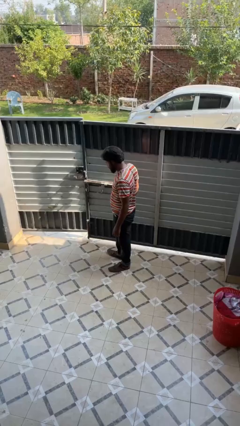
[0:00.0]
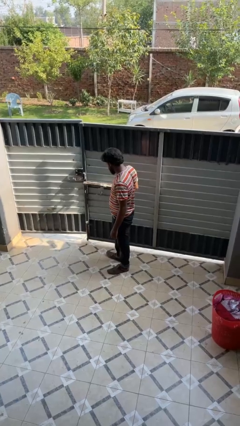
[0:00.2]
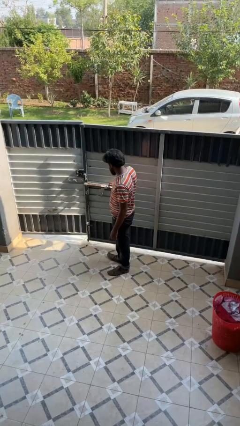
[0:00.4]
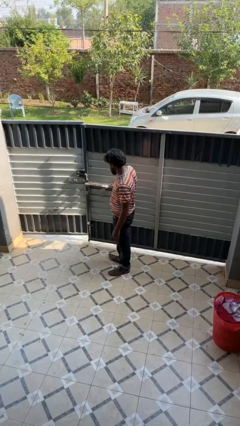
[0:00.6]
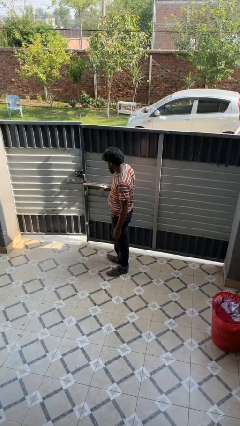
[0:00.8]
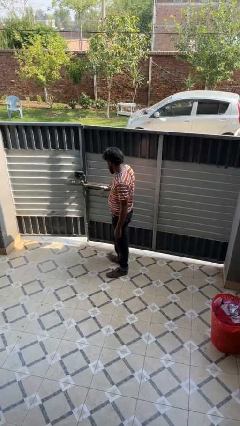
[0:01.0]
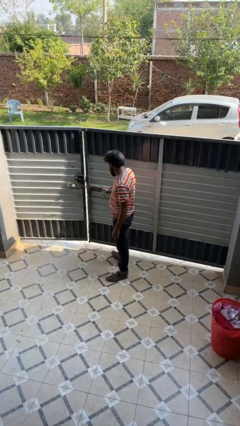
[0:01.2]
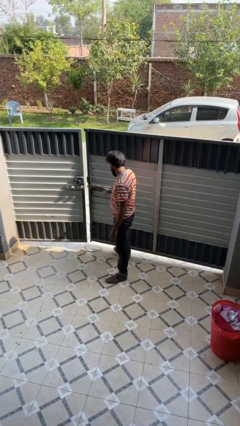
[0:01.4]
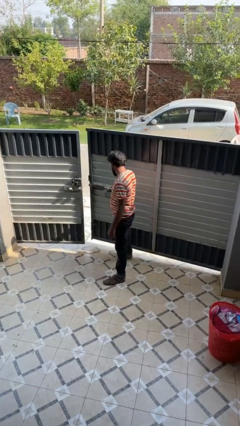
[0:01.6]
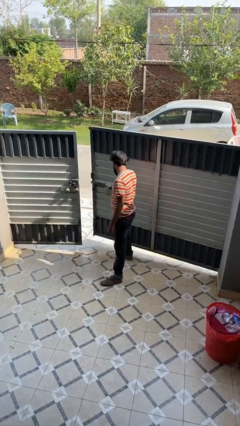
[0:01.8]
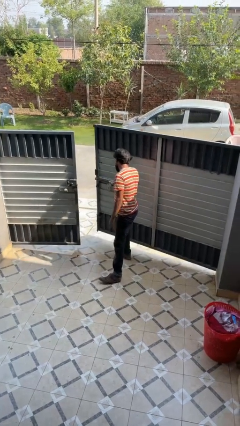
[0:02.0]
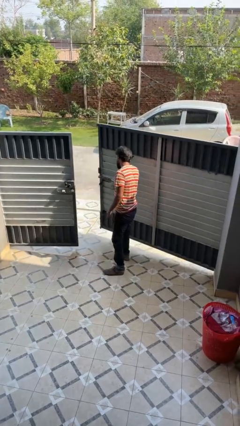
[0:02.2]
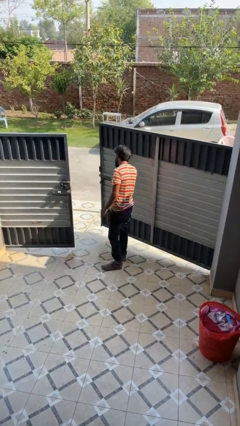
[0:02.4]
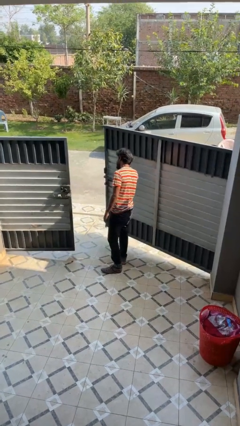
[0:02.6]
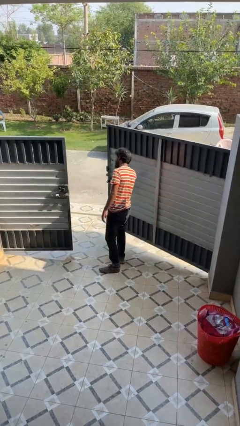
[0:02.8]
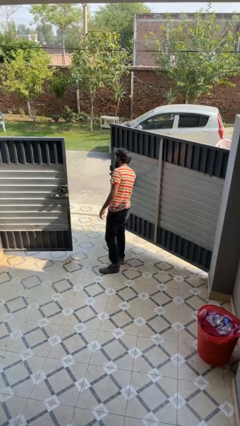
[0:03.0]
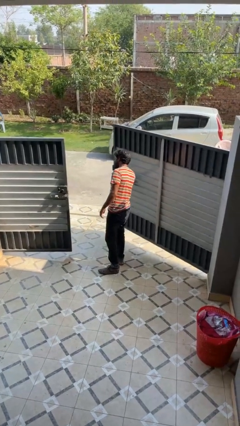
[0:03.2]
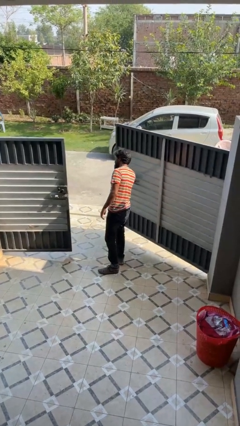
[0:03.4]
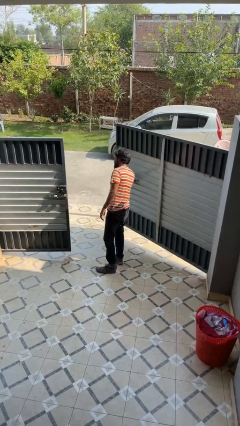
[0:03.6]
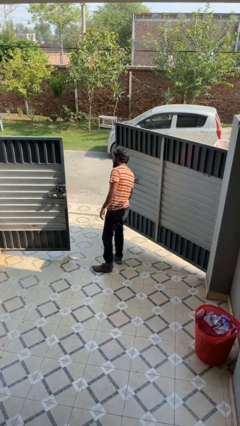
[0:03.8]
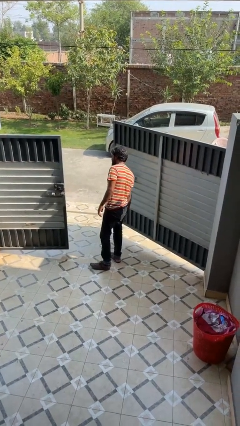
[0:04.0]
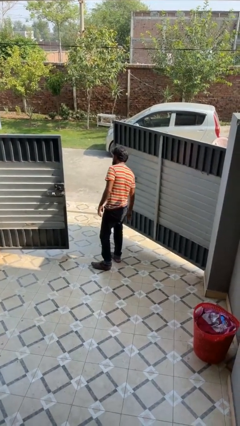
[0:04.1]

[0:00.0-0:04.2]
person opens gate

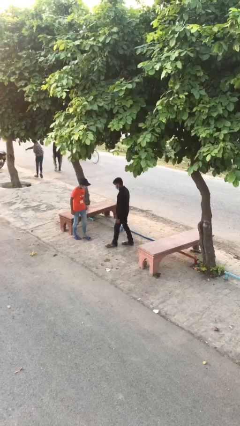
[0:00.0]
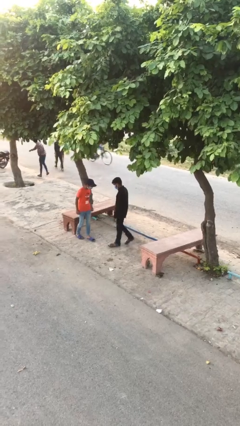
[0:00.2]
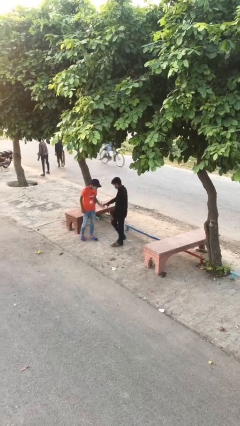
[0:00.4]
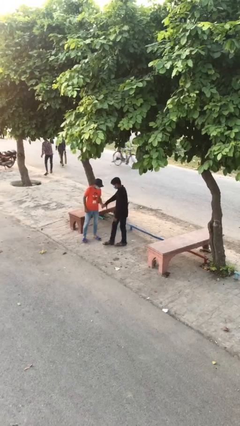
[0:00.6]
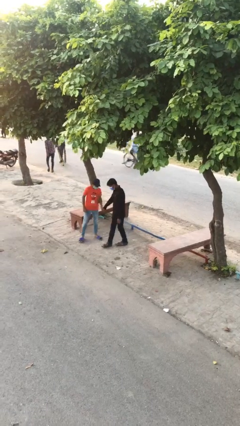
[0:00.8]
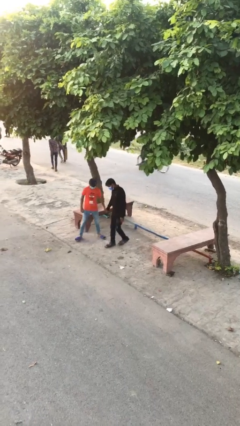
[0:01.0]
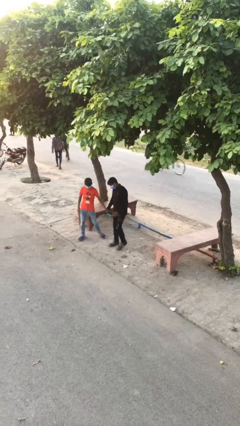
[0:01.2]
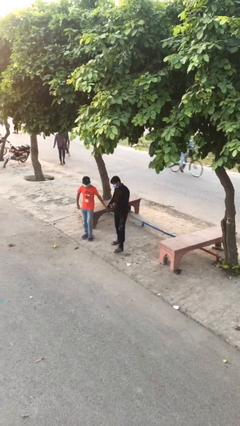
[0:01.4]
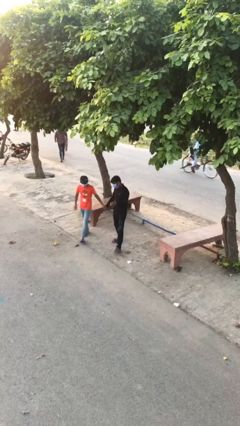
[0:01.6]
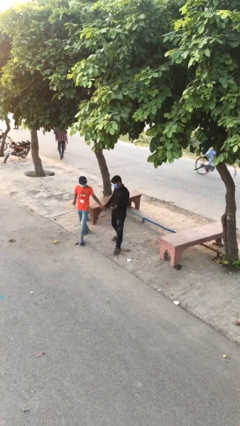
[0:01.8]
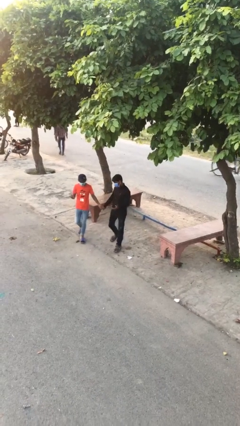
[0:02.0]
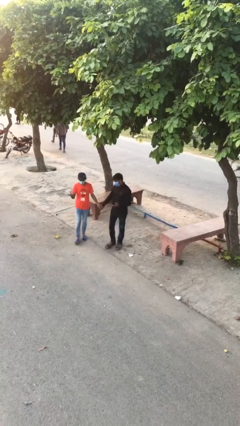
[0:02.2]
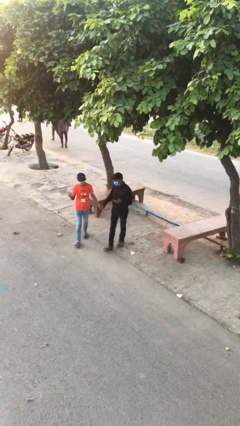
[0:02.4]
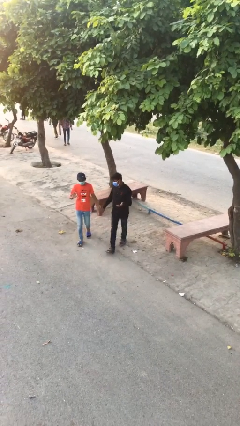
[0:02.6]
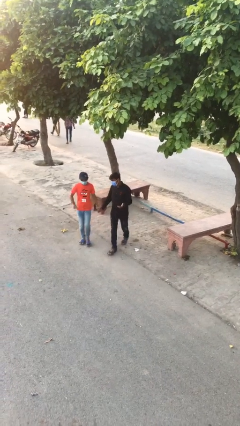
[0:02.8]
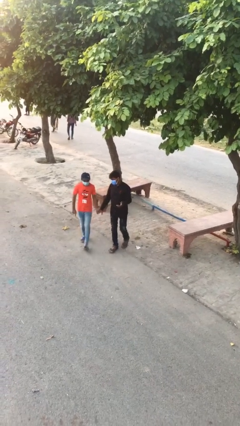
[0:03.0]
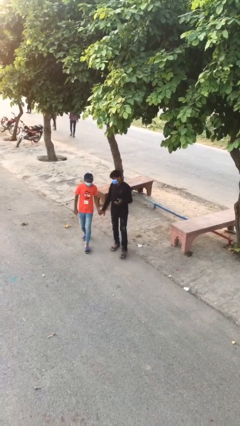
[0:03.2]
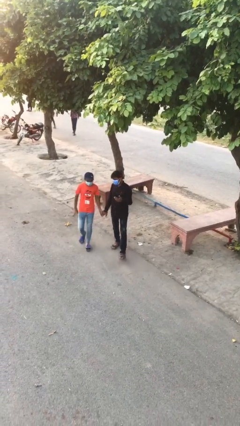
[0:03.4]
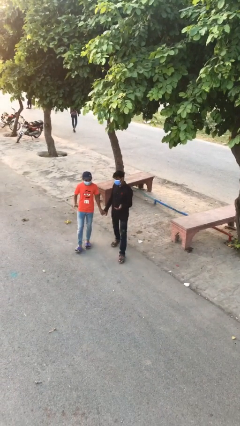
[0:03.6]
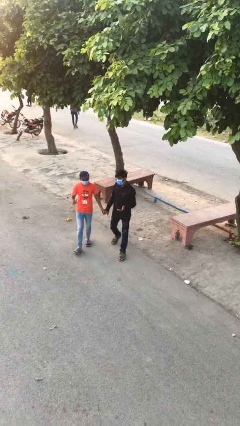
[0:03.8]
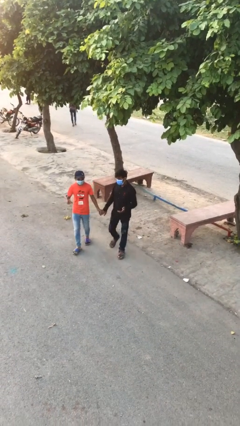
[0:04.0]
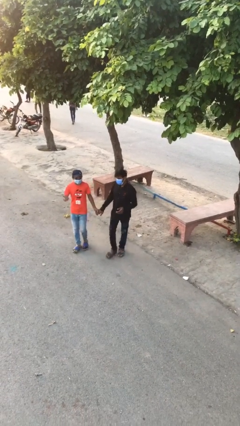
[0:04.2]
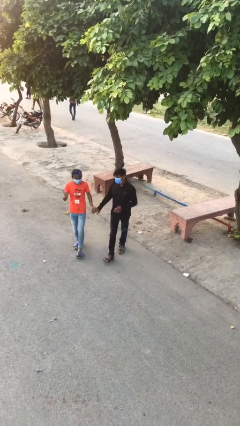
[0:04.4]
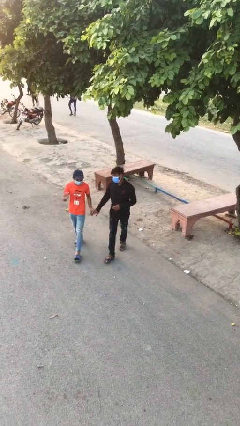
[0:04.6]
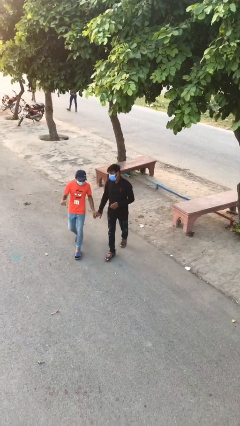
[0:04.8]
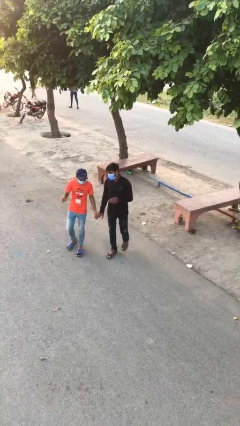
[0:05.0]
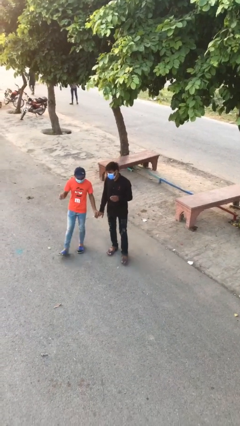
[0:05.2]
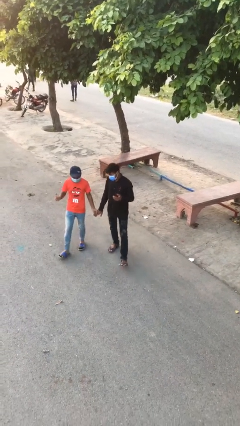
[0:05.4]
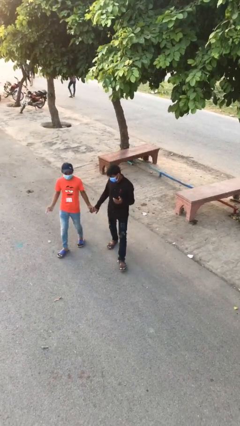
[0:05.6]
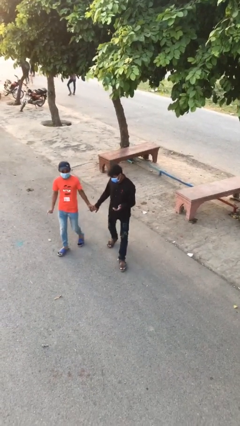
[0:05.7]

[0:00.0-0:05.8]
person holds hand

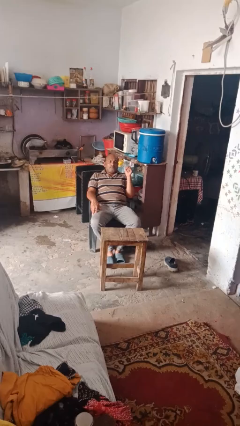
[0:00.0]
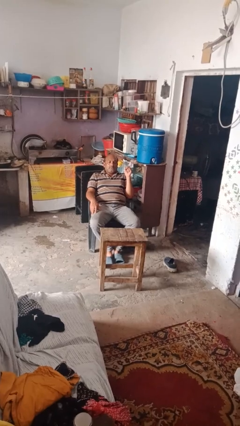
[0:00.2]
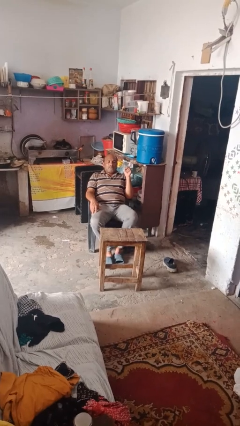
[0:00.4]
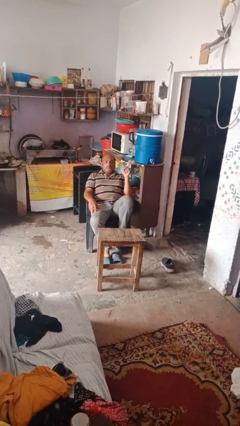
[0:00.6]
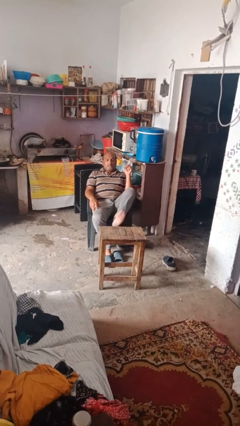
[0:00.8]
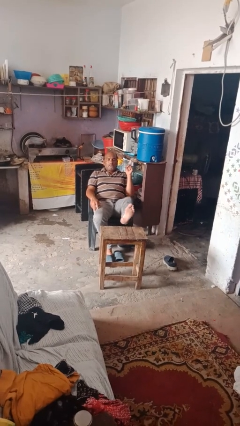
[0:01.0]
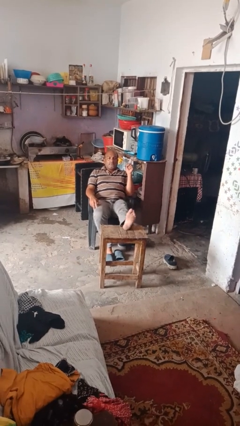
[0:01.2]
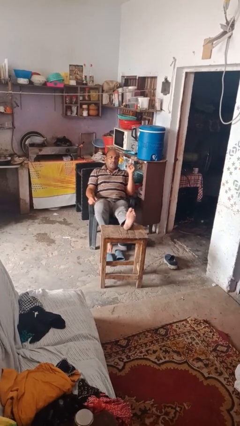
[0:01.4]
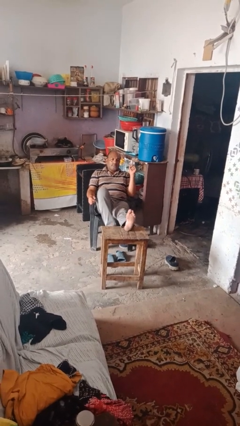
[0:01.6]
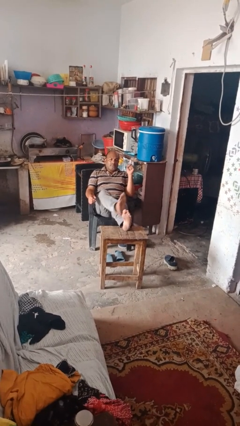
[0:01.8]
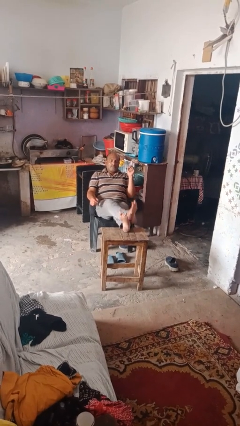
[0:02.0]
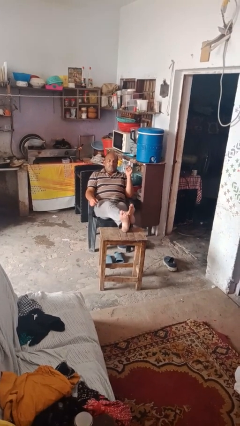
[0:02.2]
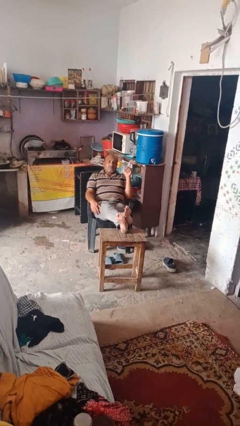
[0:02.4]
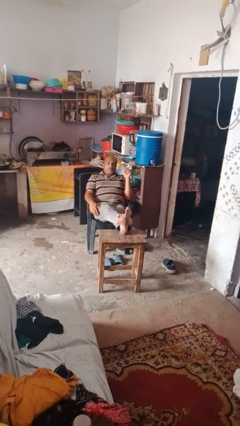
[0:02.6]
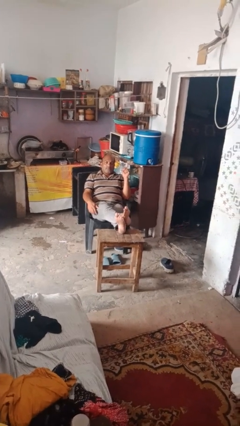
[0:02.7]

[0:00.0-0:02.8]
person puts feet up

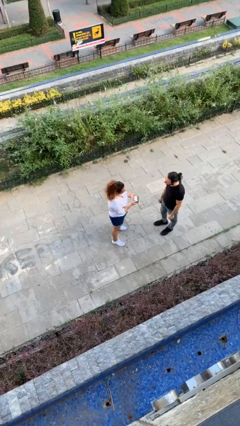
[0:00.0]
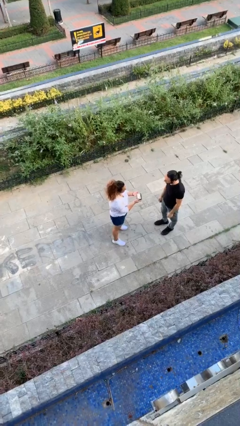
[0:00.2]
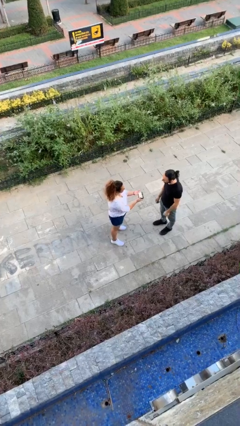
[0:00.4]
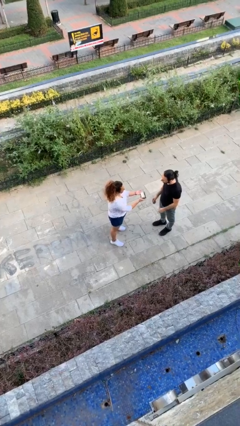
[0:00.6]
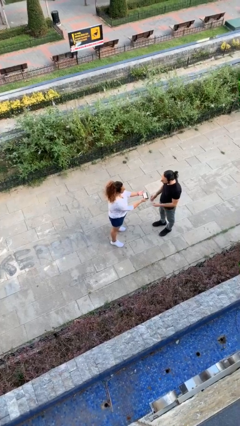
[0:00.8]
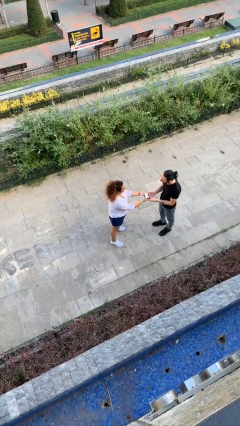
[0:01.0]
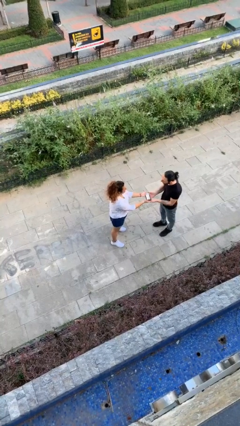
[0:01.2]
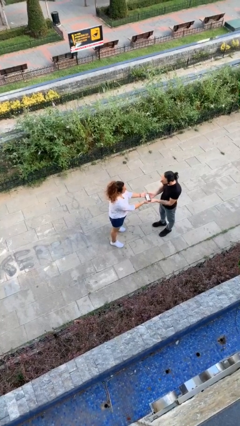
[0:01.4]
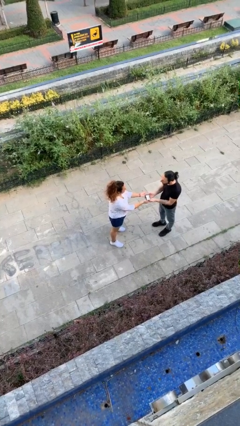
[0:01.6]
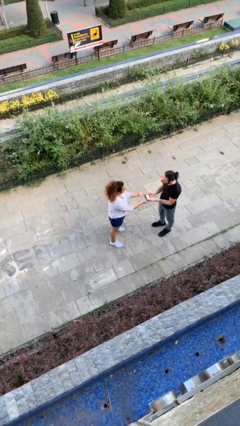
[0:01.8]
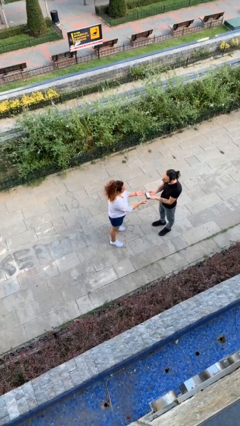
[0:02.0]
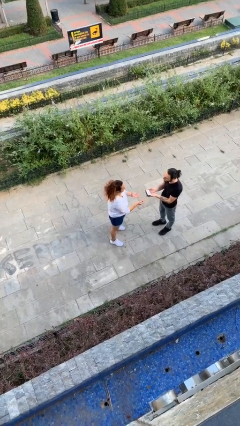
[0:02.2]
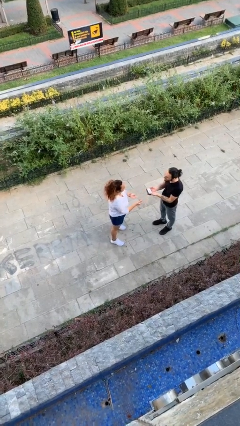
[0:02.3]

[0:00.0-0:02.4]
person transfers object to person

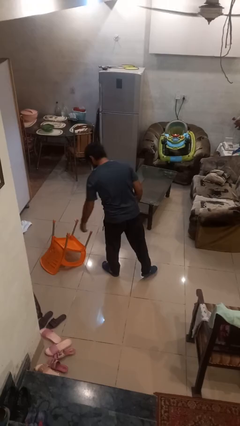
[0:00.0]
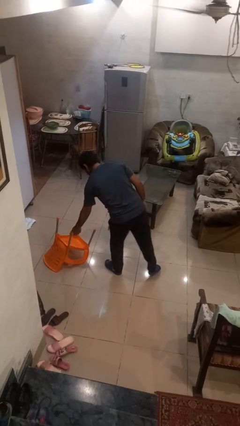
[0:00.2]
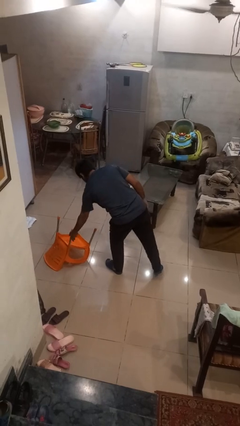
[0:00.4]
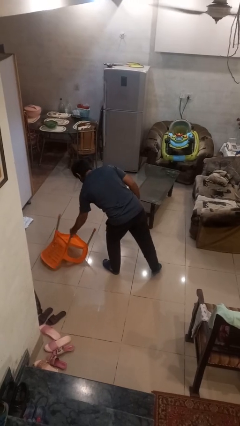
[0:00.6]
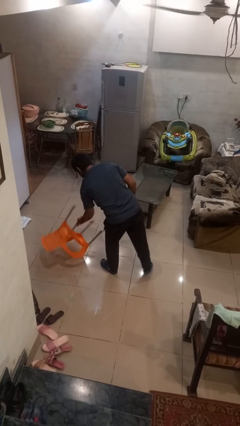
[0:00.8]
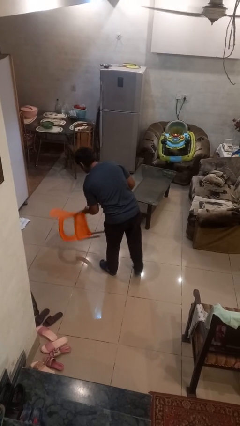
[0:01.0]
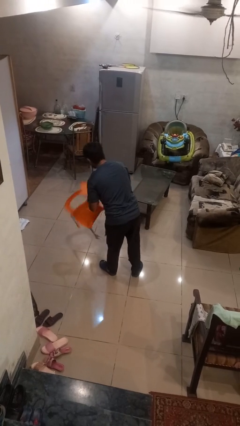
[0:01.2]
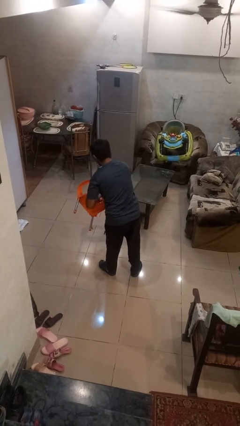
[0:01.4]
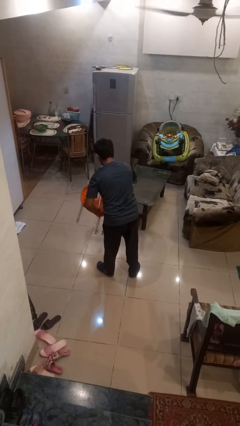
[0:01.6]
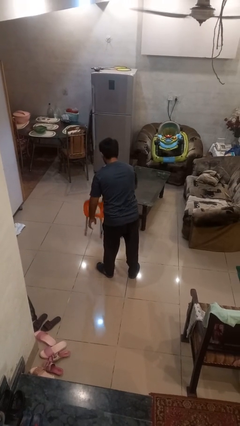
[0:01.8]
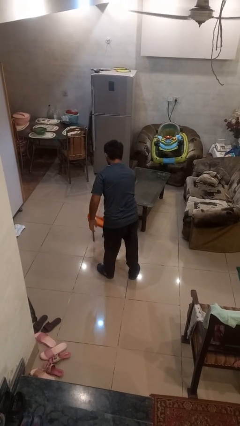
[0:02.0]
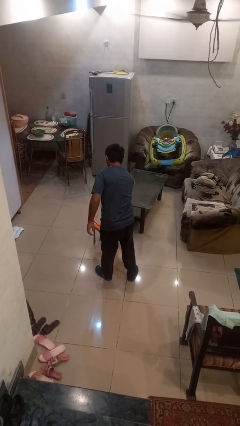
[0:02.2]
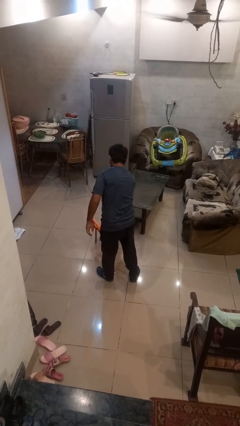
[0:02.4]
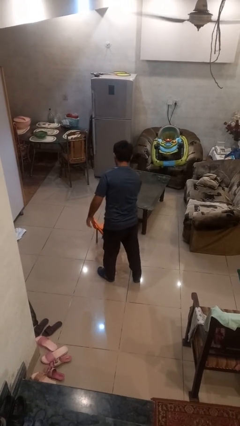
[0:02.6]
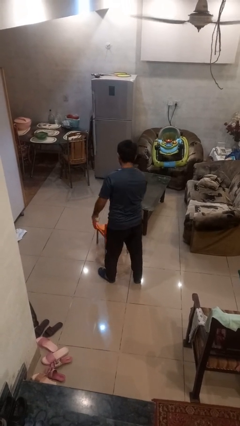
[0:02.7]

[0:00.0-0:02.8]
person sets upright furniture
